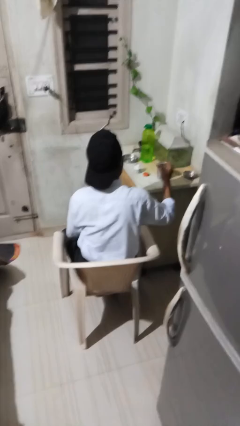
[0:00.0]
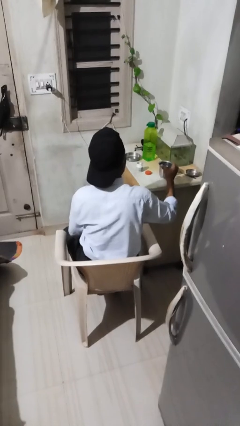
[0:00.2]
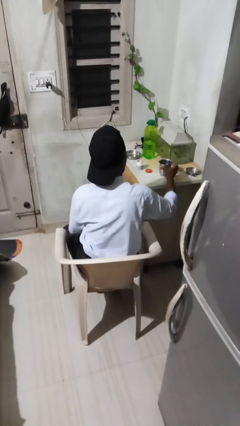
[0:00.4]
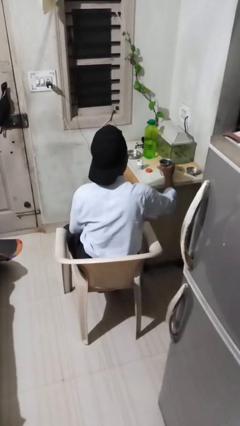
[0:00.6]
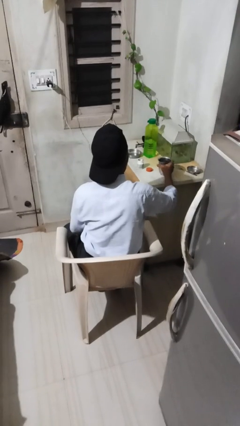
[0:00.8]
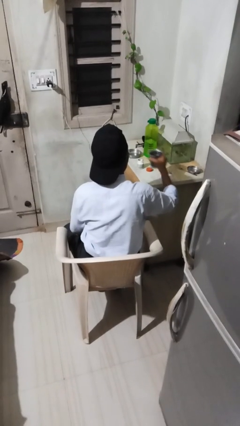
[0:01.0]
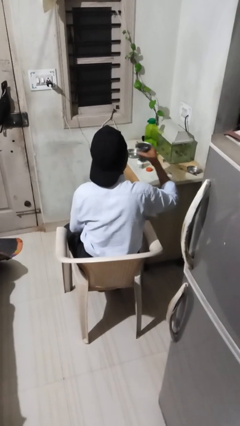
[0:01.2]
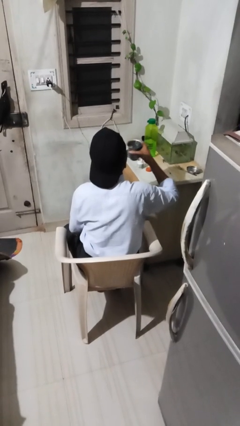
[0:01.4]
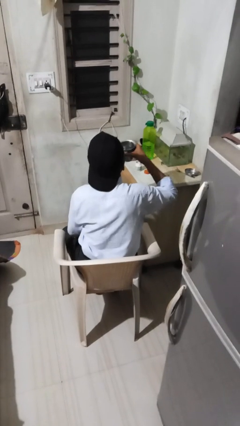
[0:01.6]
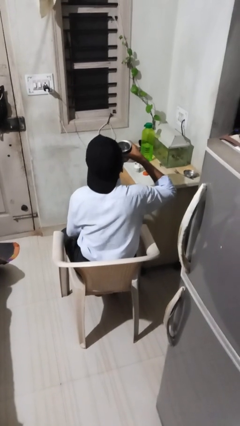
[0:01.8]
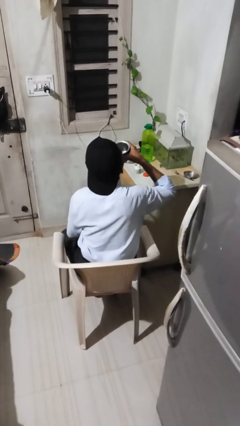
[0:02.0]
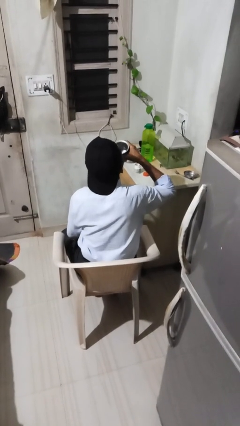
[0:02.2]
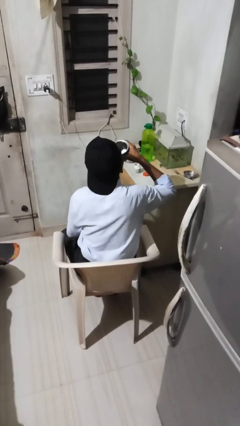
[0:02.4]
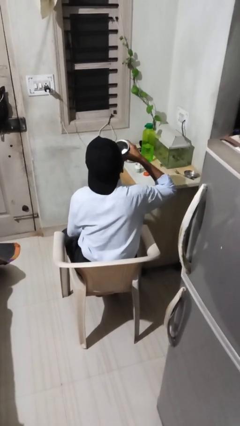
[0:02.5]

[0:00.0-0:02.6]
person drinks from cup

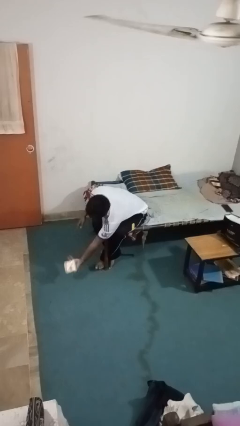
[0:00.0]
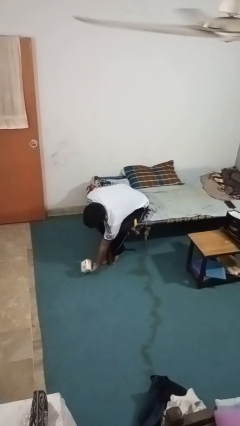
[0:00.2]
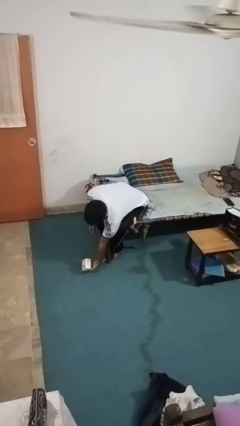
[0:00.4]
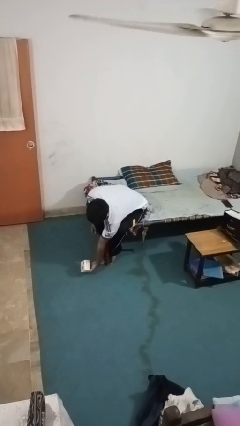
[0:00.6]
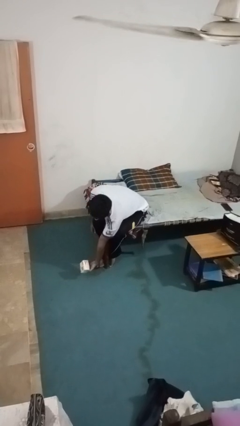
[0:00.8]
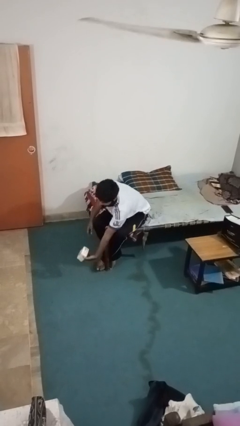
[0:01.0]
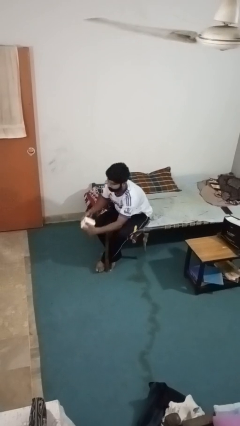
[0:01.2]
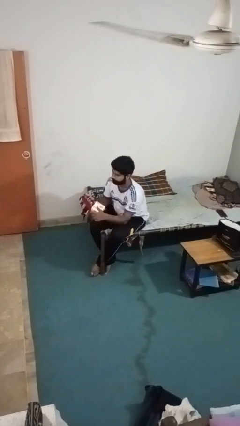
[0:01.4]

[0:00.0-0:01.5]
person catches dropped object

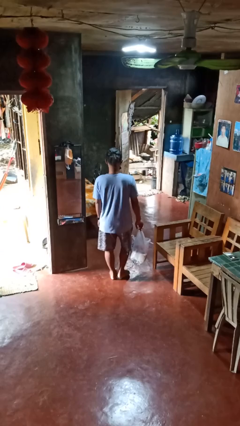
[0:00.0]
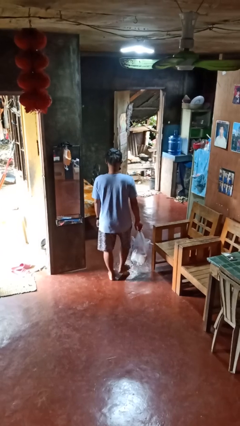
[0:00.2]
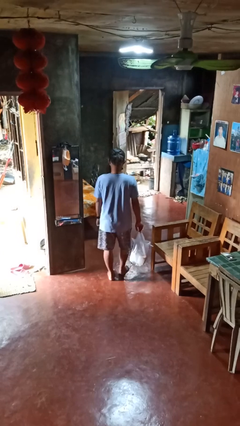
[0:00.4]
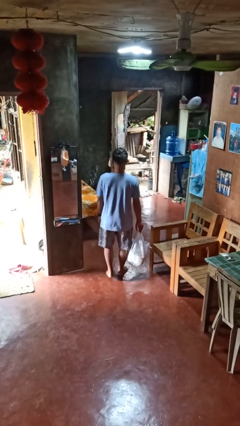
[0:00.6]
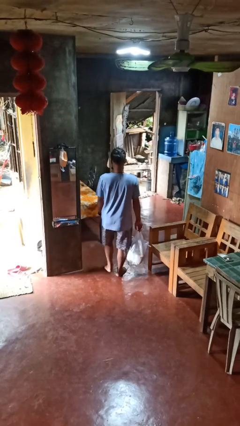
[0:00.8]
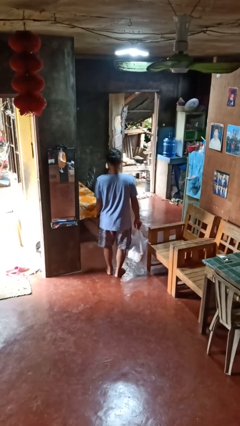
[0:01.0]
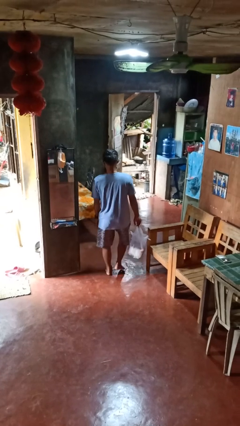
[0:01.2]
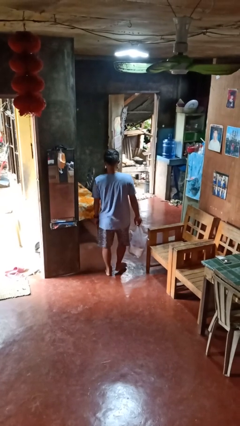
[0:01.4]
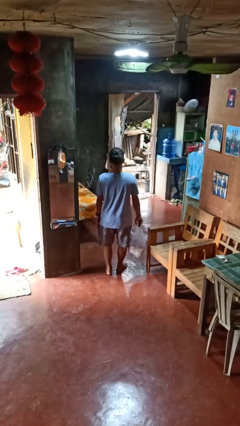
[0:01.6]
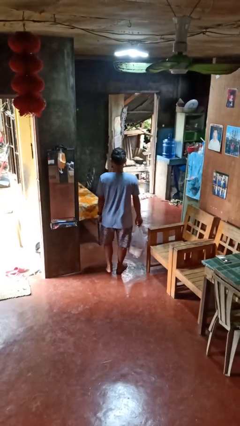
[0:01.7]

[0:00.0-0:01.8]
person carries groceries

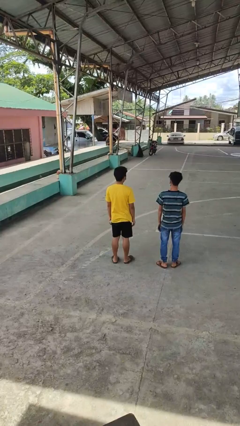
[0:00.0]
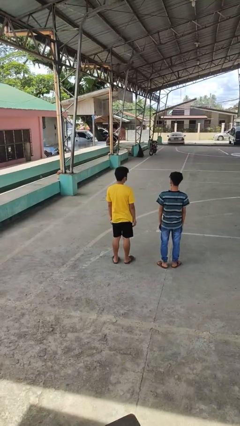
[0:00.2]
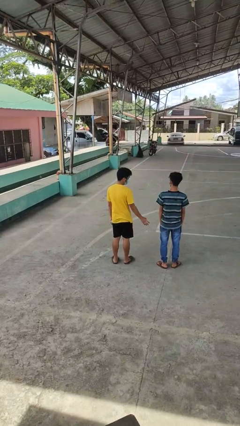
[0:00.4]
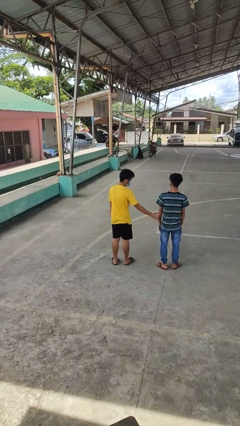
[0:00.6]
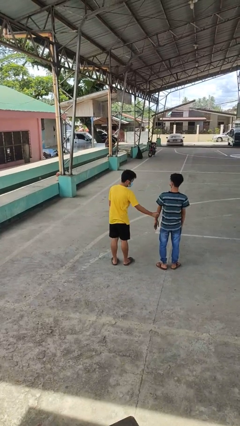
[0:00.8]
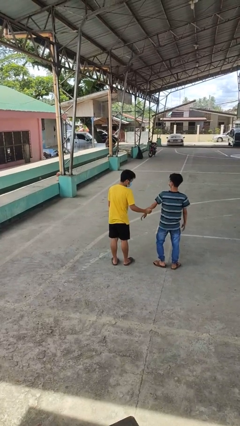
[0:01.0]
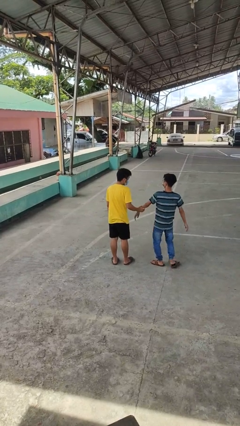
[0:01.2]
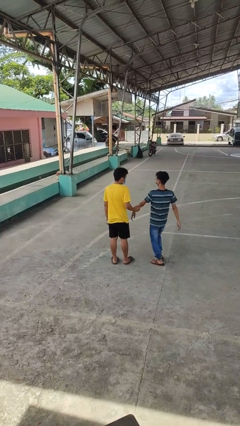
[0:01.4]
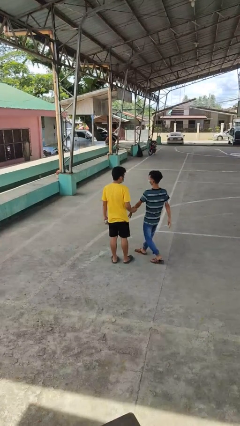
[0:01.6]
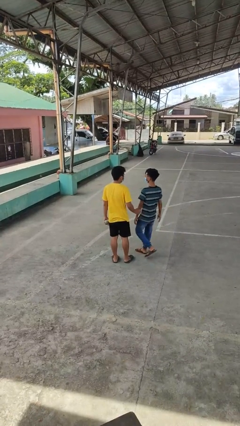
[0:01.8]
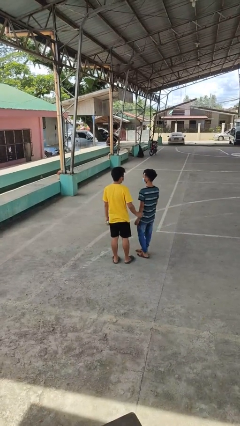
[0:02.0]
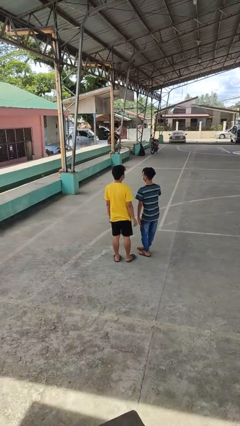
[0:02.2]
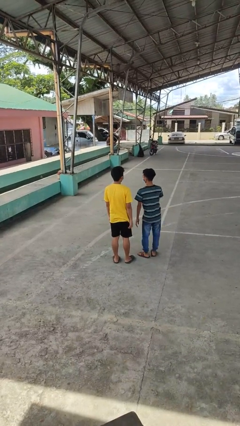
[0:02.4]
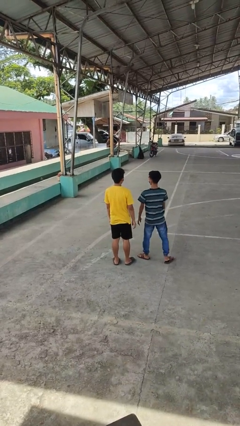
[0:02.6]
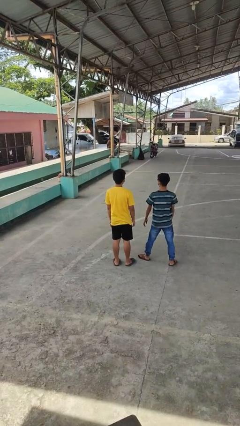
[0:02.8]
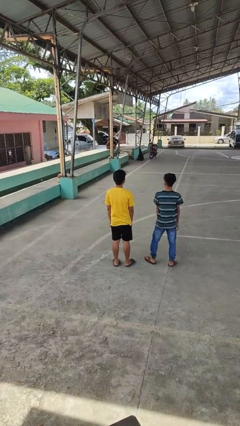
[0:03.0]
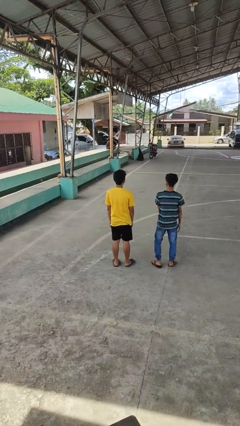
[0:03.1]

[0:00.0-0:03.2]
person grabs person by forearm

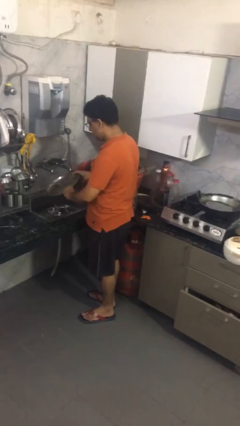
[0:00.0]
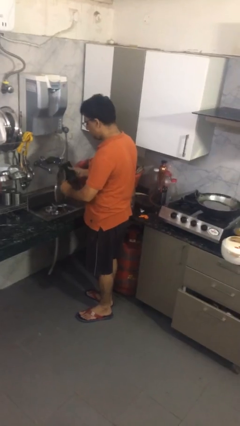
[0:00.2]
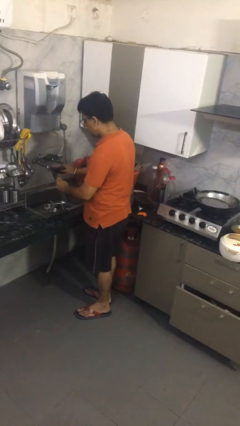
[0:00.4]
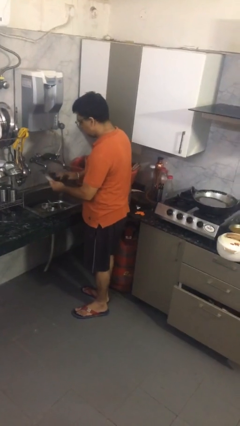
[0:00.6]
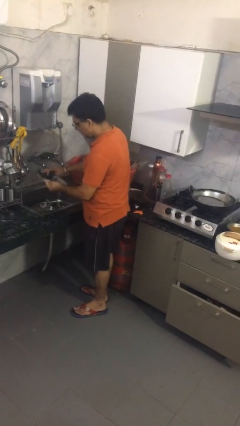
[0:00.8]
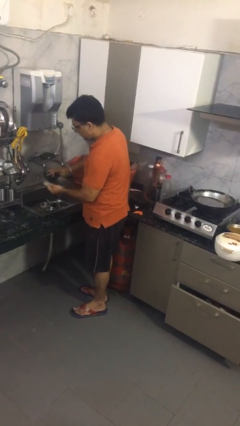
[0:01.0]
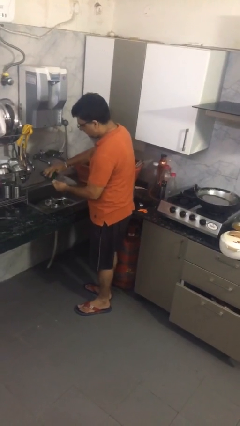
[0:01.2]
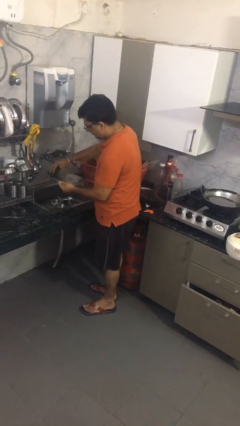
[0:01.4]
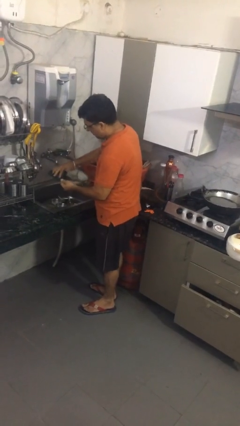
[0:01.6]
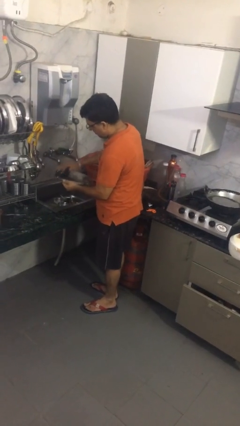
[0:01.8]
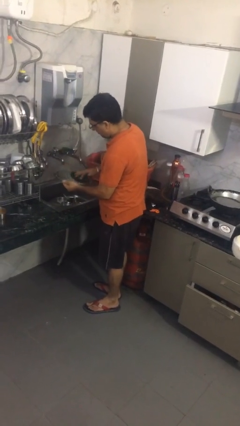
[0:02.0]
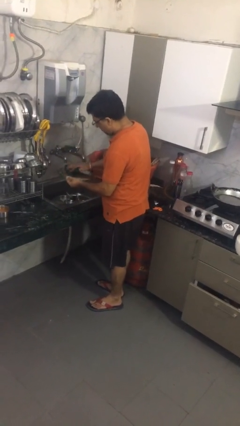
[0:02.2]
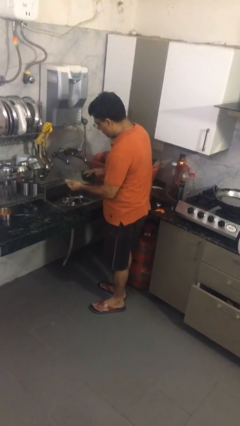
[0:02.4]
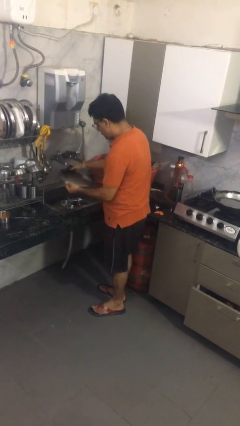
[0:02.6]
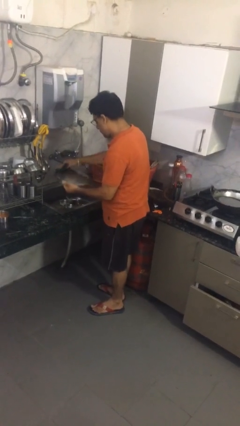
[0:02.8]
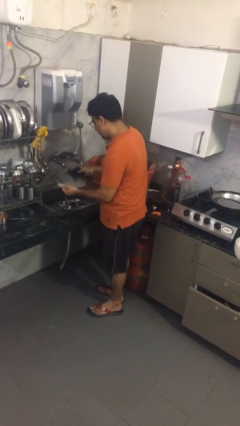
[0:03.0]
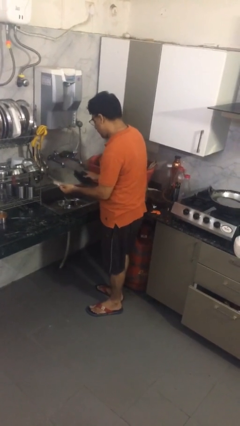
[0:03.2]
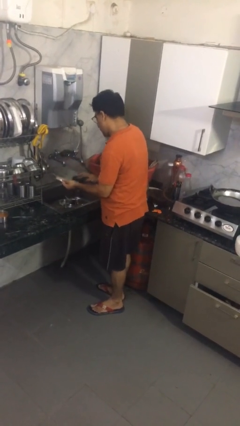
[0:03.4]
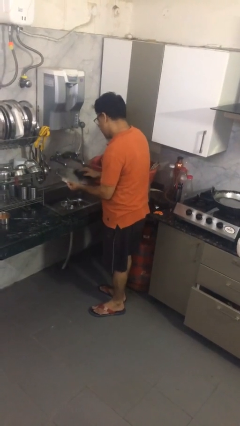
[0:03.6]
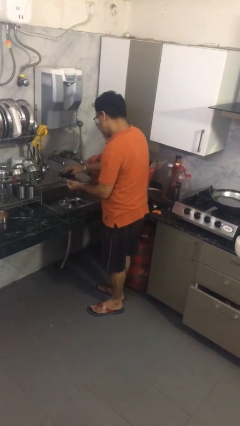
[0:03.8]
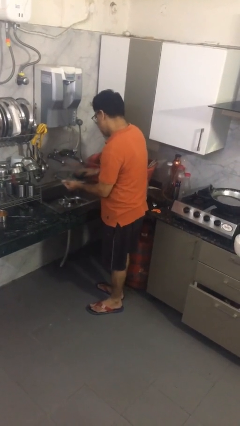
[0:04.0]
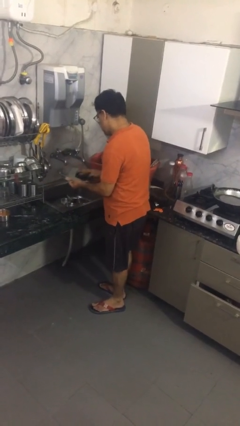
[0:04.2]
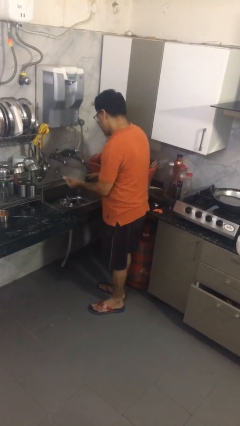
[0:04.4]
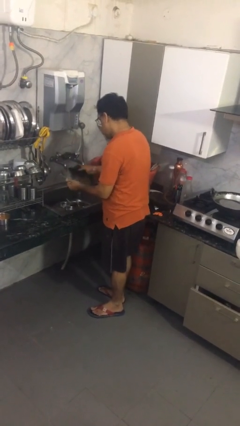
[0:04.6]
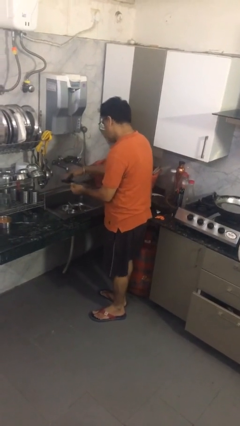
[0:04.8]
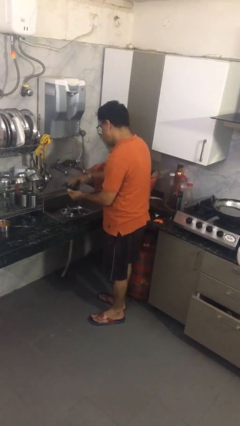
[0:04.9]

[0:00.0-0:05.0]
person washes dish

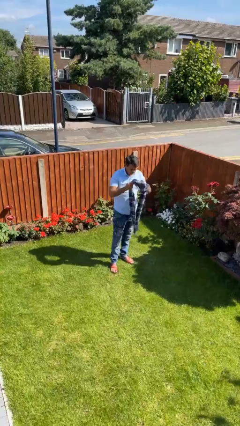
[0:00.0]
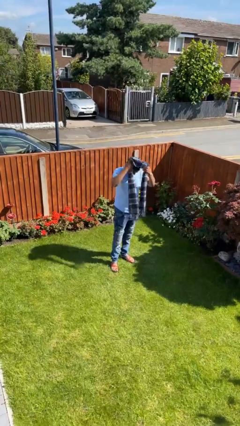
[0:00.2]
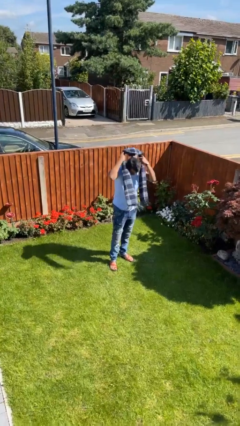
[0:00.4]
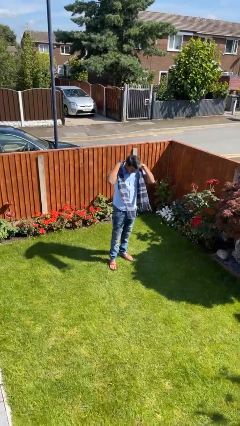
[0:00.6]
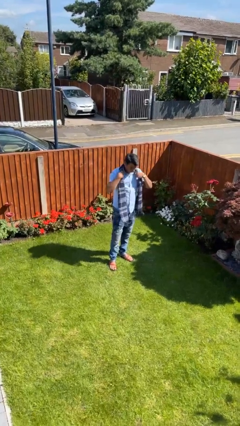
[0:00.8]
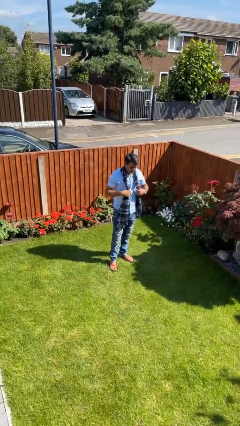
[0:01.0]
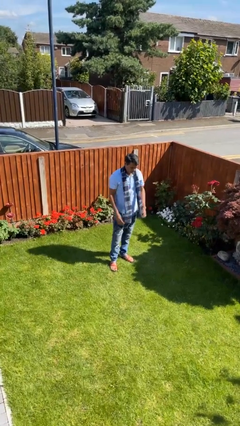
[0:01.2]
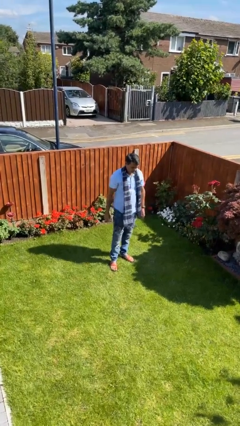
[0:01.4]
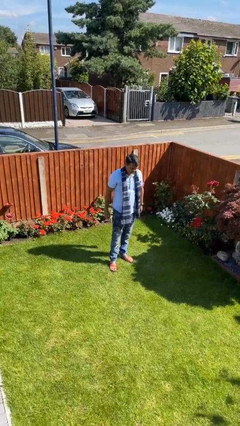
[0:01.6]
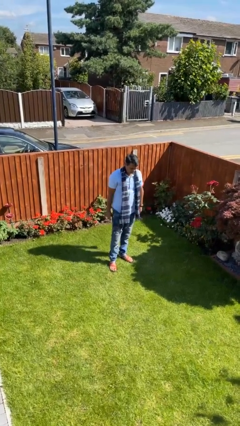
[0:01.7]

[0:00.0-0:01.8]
person puts on scarf

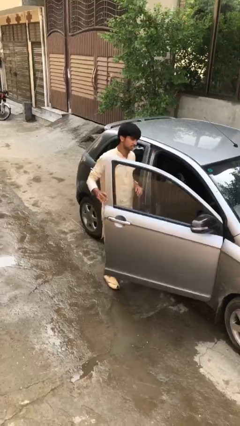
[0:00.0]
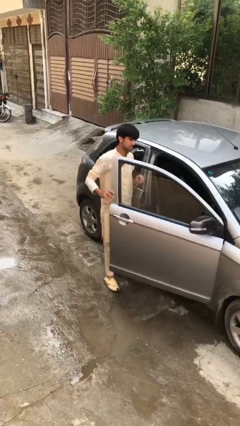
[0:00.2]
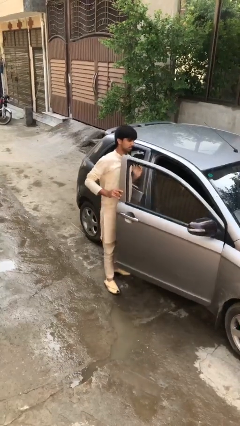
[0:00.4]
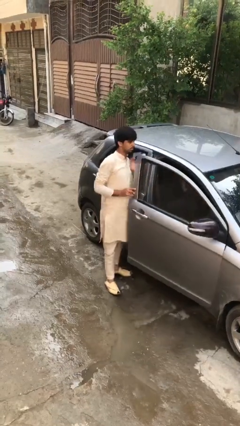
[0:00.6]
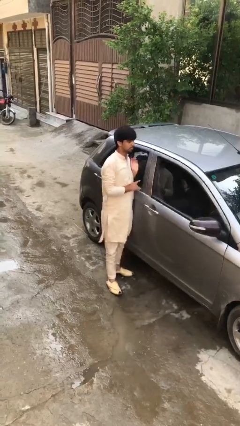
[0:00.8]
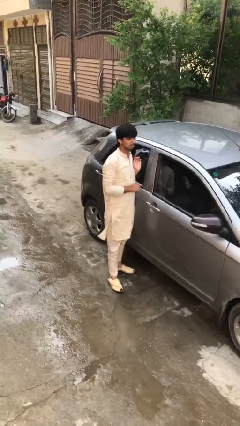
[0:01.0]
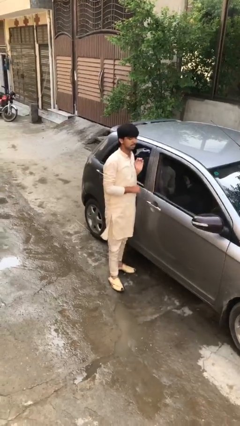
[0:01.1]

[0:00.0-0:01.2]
person closes car door
